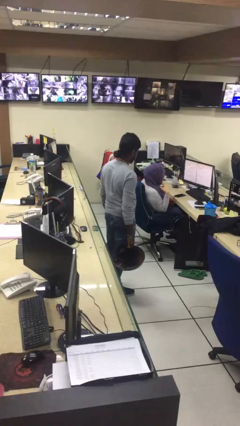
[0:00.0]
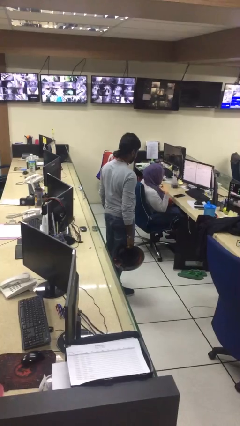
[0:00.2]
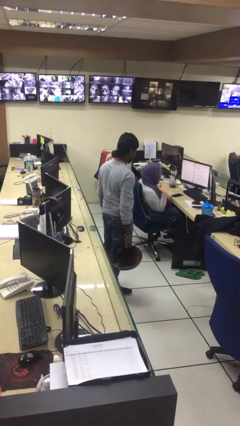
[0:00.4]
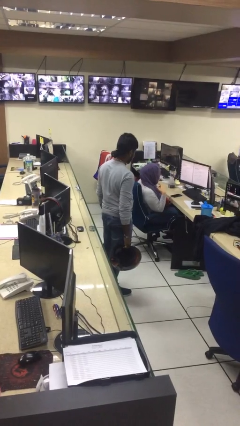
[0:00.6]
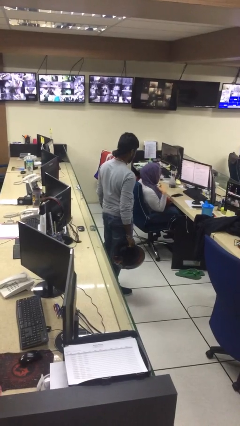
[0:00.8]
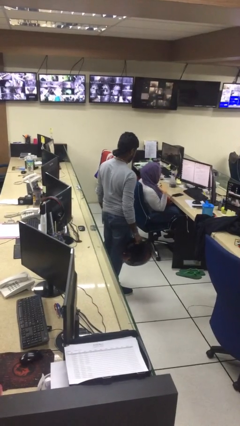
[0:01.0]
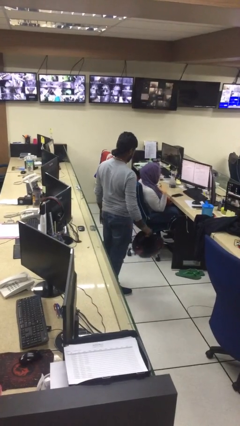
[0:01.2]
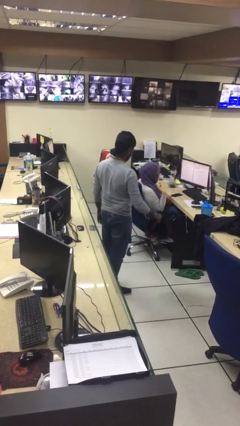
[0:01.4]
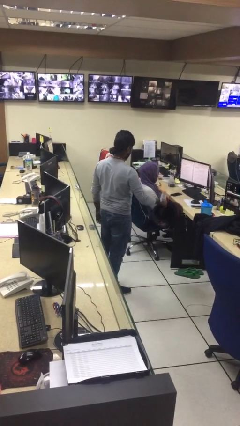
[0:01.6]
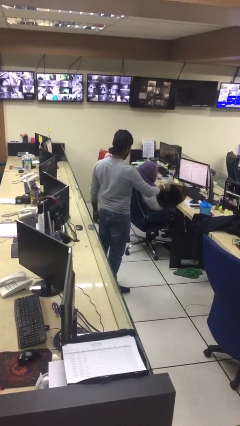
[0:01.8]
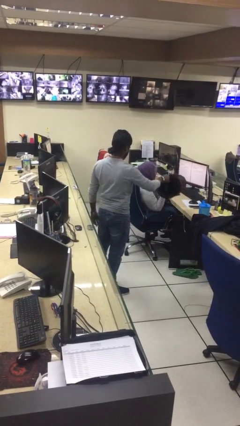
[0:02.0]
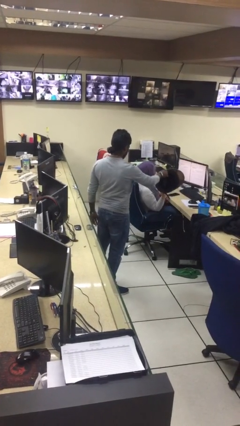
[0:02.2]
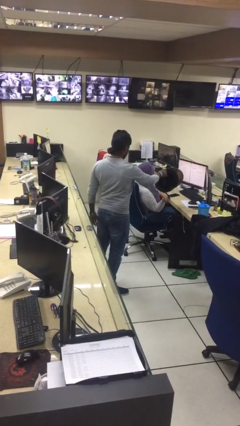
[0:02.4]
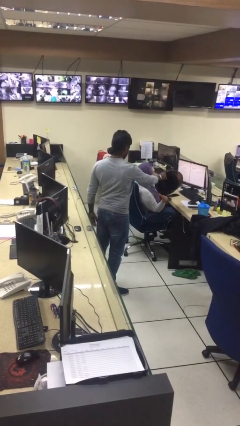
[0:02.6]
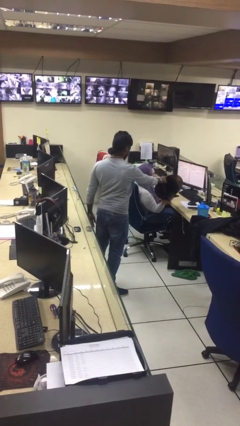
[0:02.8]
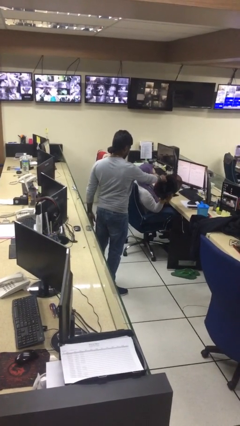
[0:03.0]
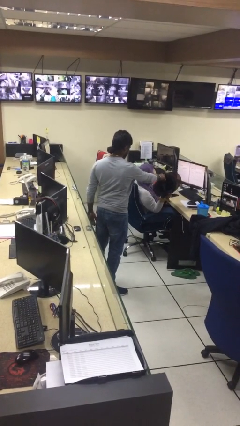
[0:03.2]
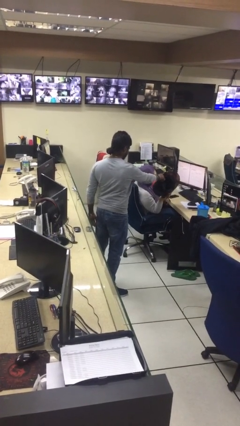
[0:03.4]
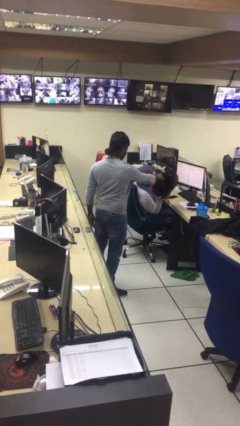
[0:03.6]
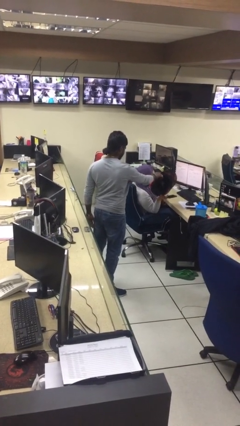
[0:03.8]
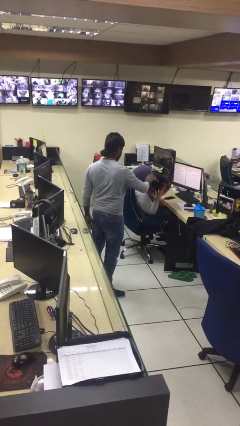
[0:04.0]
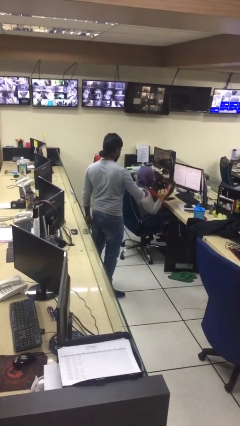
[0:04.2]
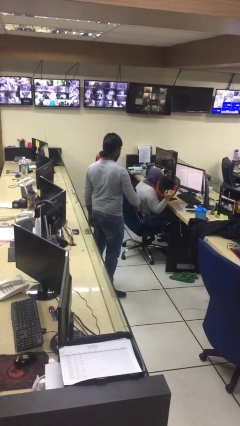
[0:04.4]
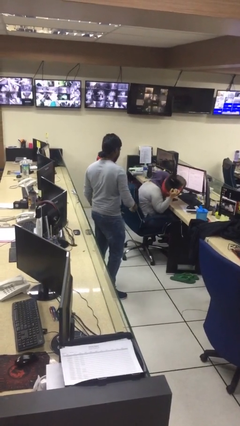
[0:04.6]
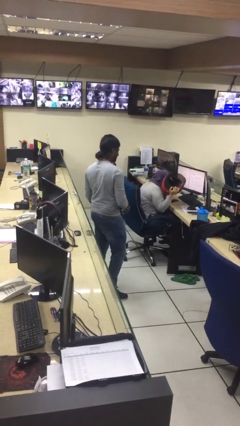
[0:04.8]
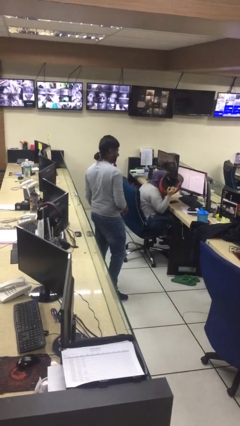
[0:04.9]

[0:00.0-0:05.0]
person transfers object to person

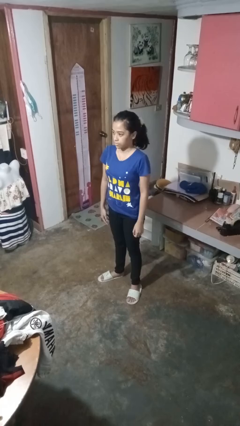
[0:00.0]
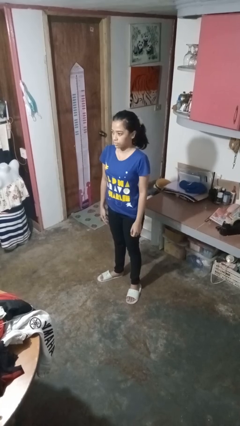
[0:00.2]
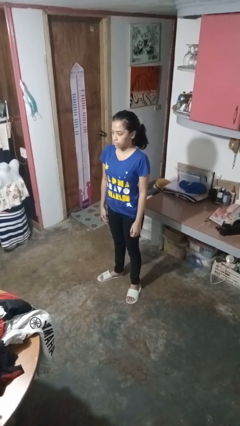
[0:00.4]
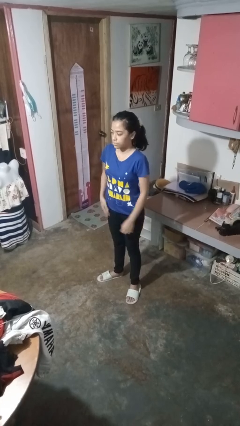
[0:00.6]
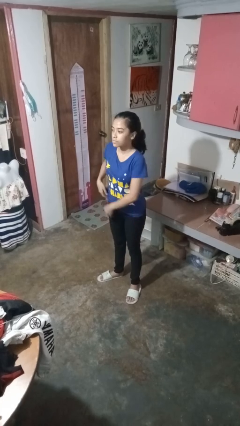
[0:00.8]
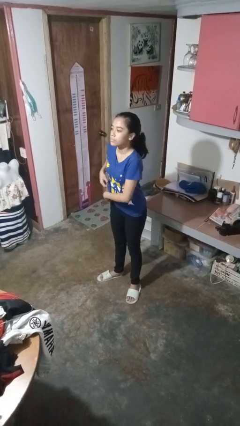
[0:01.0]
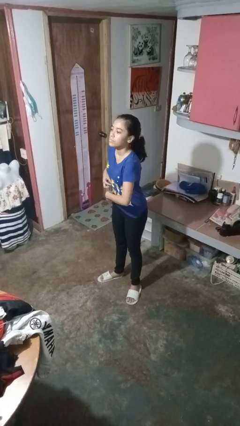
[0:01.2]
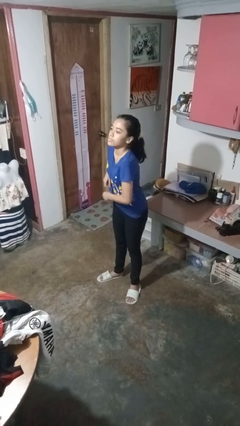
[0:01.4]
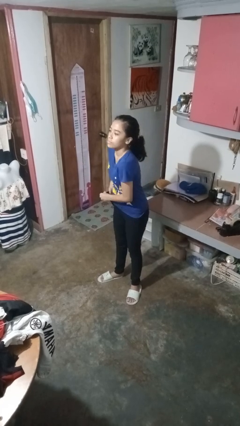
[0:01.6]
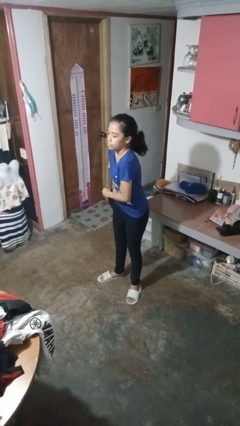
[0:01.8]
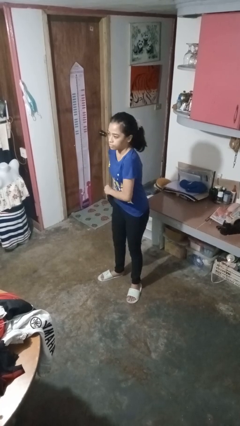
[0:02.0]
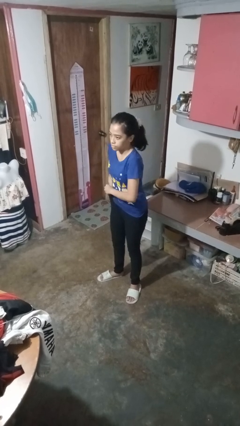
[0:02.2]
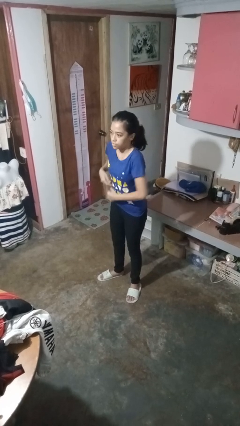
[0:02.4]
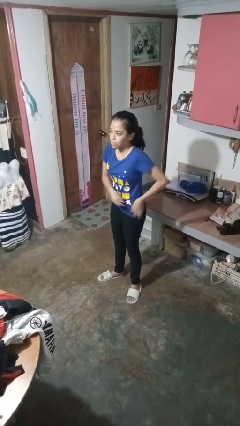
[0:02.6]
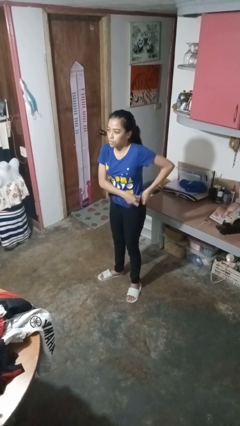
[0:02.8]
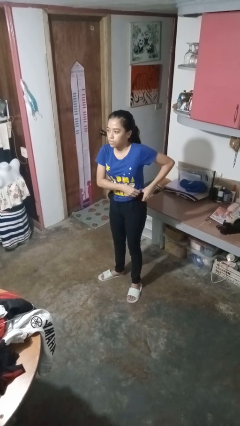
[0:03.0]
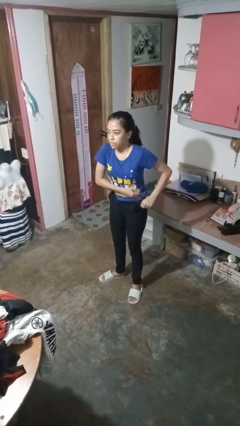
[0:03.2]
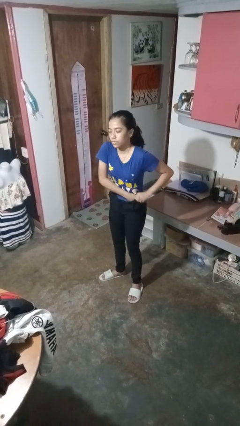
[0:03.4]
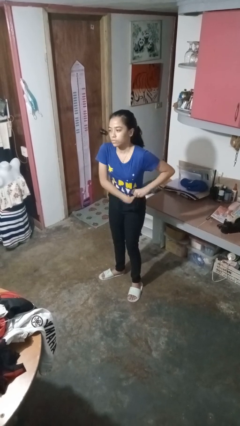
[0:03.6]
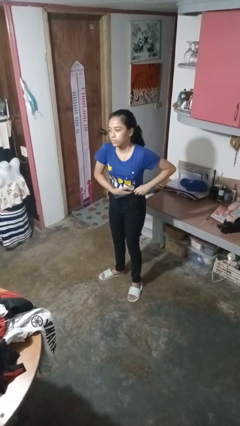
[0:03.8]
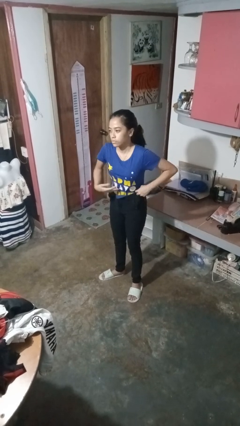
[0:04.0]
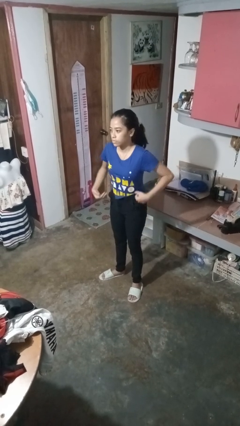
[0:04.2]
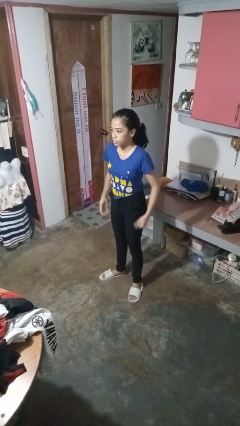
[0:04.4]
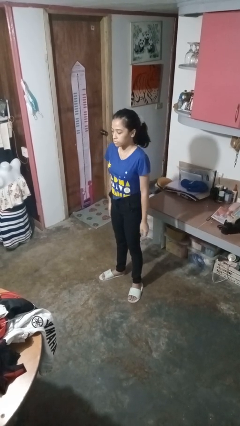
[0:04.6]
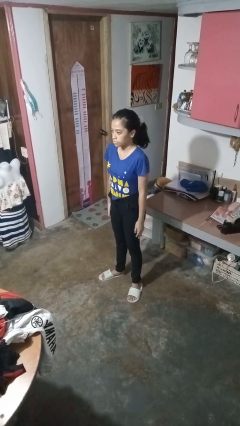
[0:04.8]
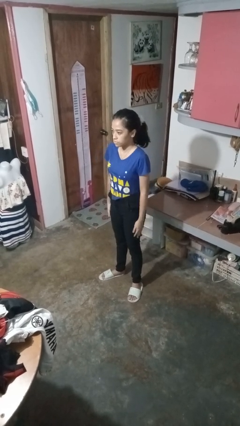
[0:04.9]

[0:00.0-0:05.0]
person tucks in shirt

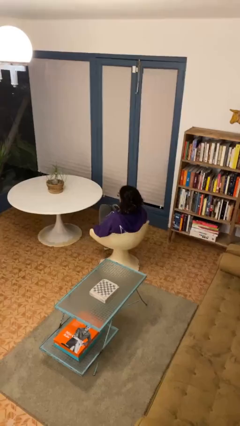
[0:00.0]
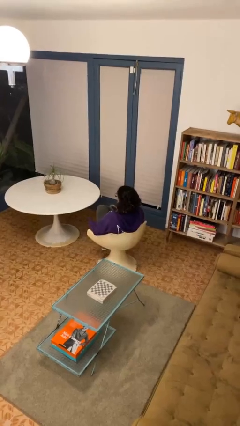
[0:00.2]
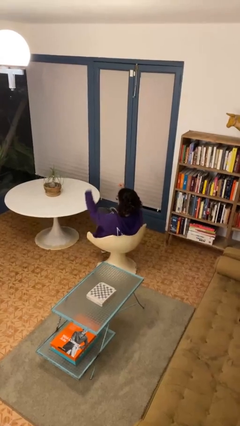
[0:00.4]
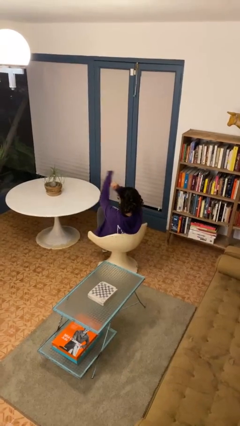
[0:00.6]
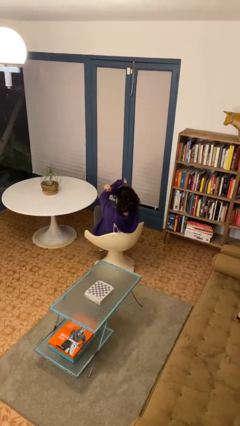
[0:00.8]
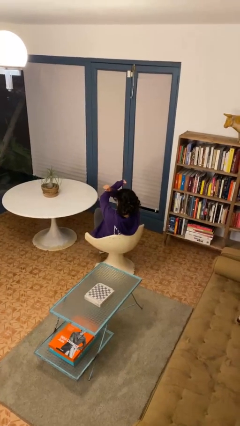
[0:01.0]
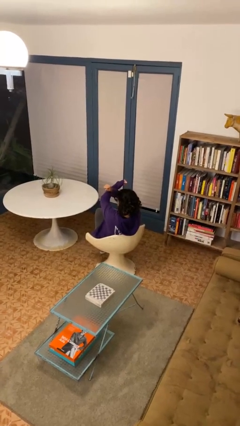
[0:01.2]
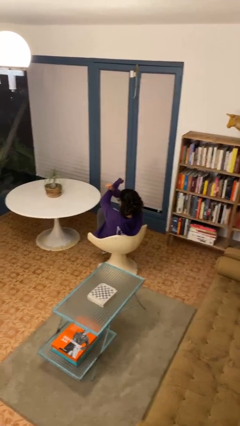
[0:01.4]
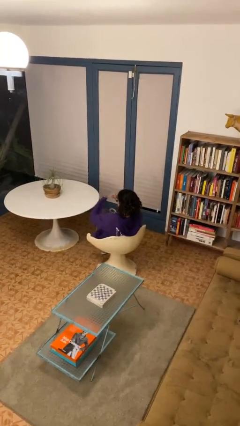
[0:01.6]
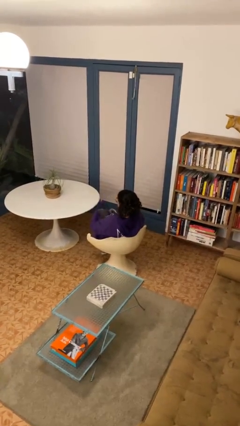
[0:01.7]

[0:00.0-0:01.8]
person gestures arms x

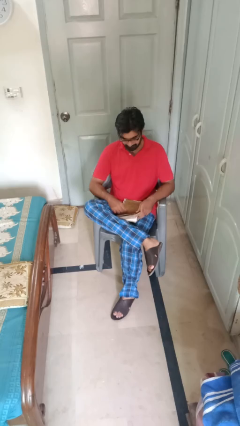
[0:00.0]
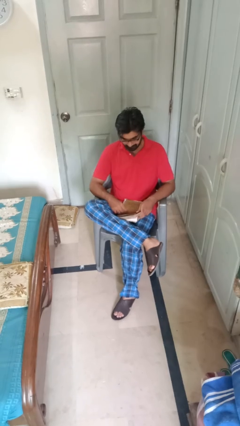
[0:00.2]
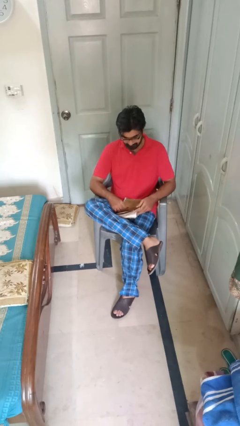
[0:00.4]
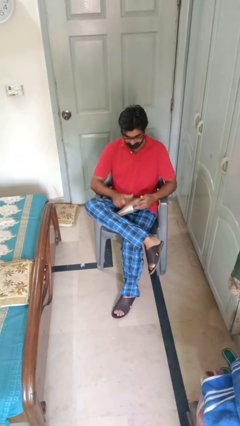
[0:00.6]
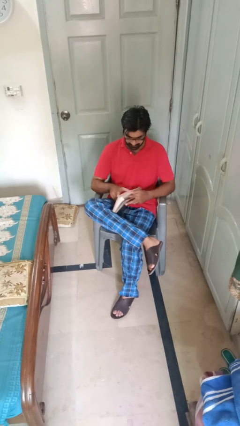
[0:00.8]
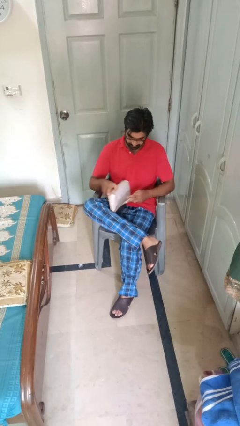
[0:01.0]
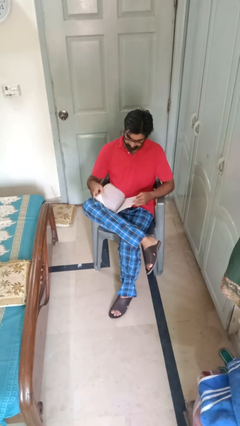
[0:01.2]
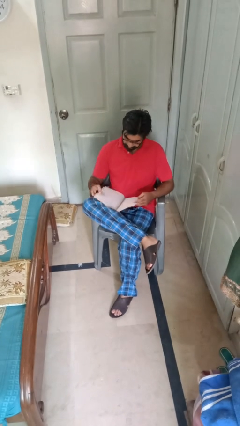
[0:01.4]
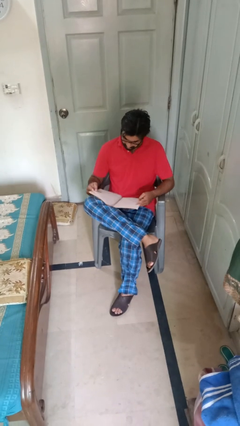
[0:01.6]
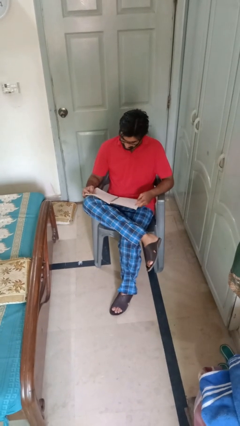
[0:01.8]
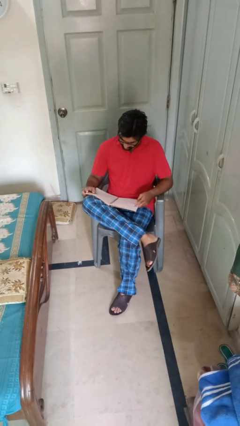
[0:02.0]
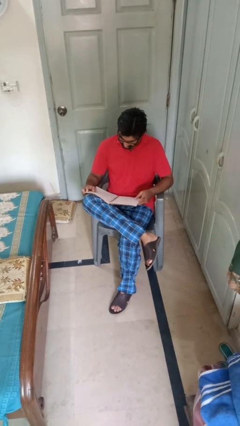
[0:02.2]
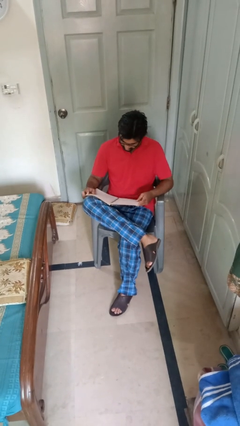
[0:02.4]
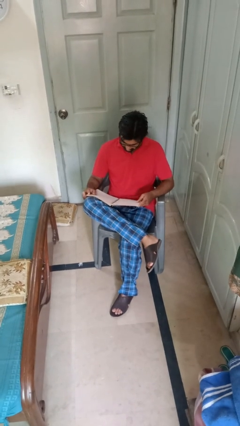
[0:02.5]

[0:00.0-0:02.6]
person reads magazine

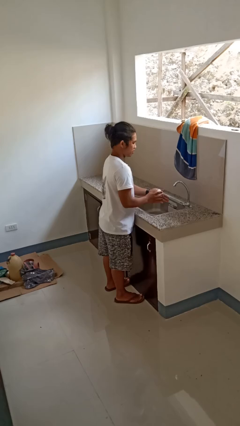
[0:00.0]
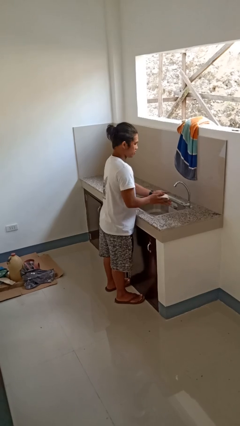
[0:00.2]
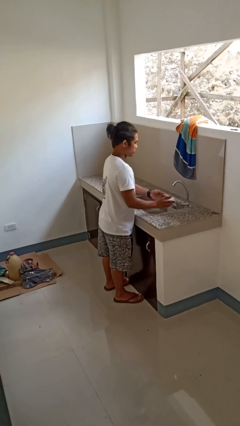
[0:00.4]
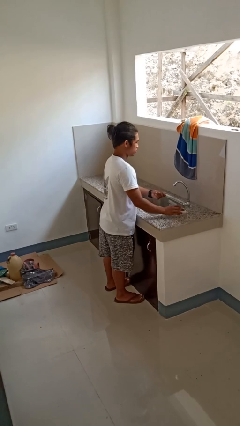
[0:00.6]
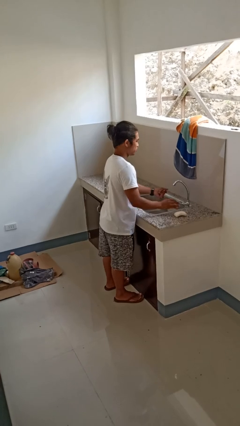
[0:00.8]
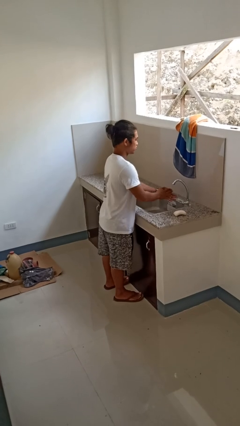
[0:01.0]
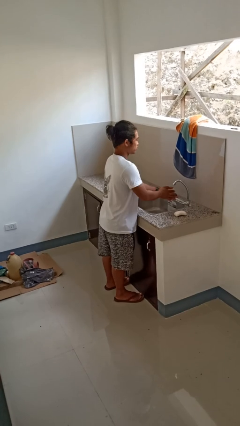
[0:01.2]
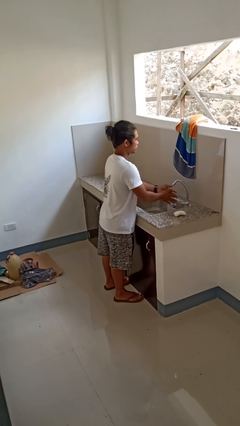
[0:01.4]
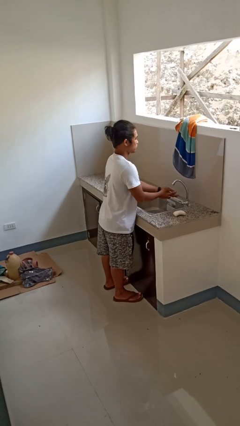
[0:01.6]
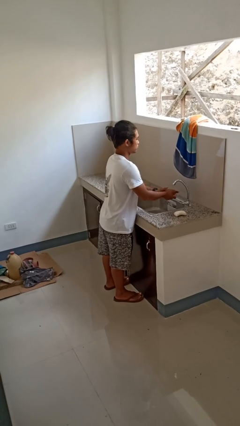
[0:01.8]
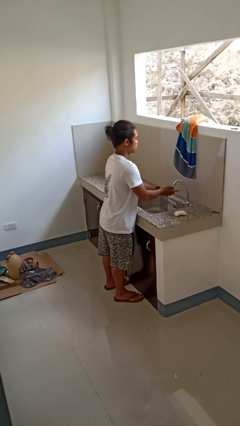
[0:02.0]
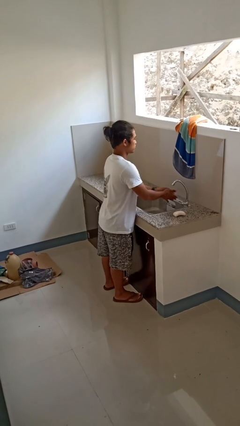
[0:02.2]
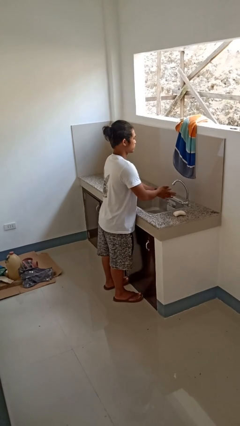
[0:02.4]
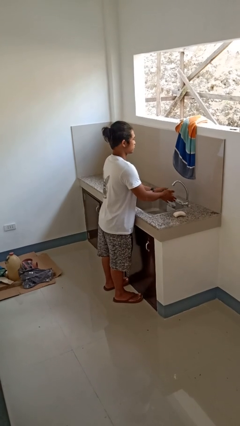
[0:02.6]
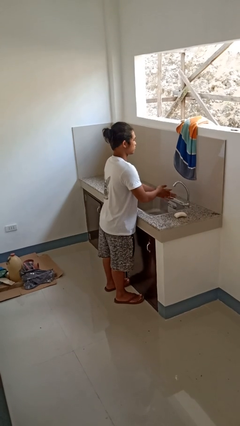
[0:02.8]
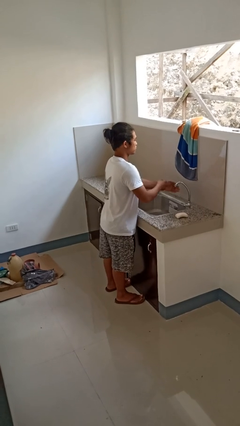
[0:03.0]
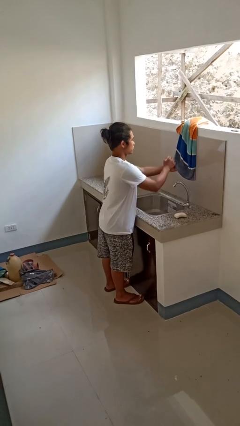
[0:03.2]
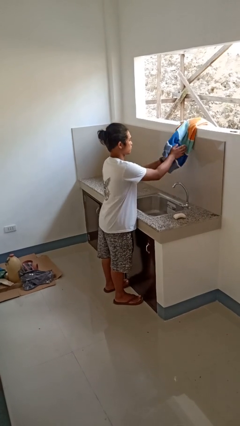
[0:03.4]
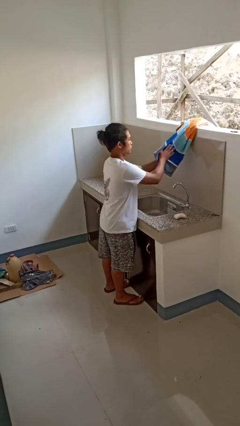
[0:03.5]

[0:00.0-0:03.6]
person washes hands
